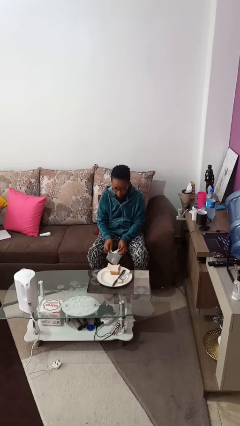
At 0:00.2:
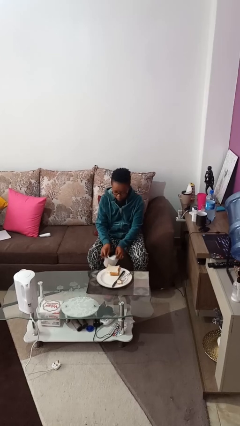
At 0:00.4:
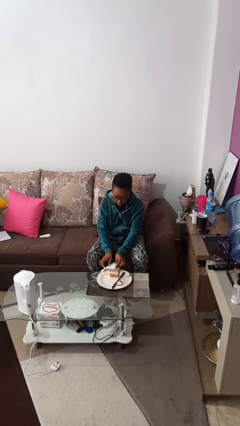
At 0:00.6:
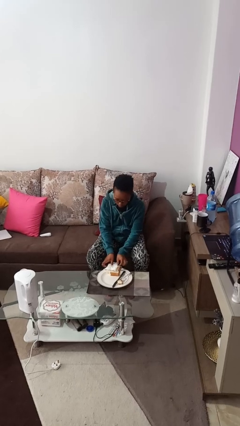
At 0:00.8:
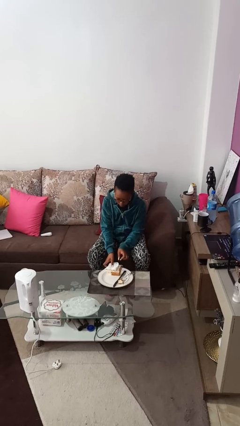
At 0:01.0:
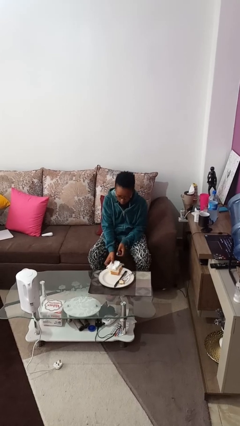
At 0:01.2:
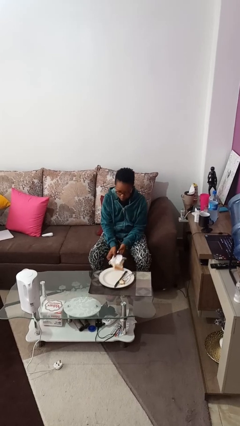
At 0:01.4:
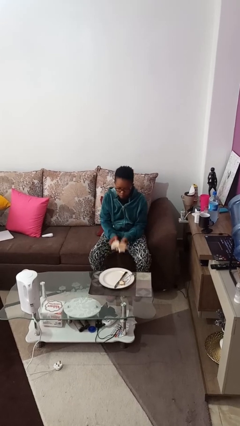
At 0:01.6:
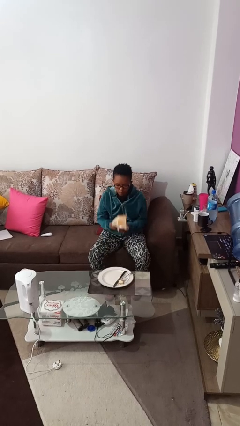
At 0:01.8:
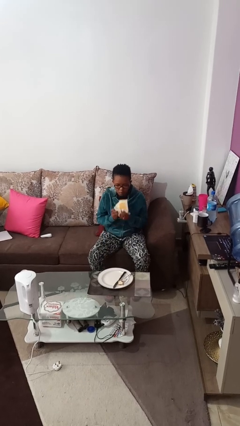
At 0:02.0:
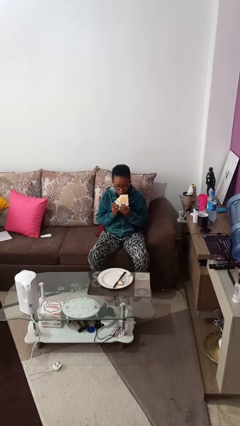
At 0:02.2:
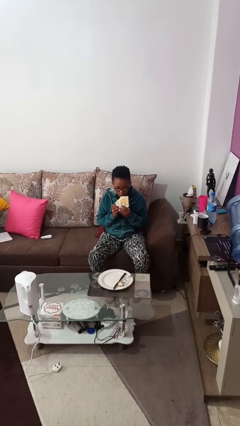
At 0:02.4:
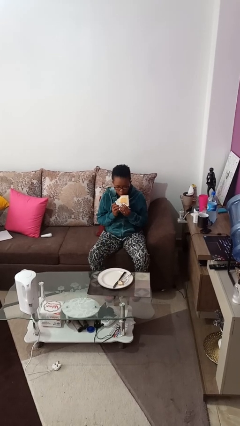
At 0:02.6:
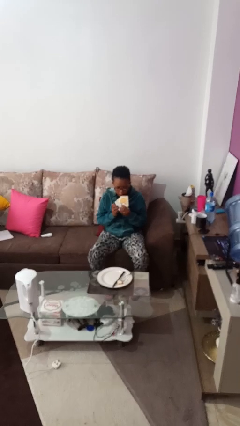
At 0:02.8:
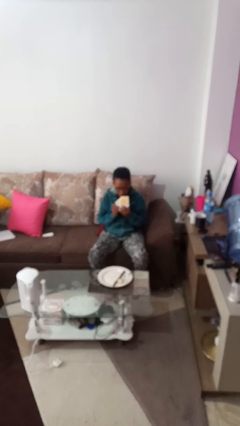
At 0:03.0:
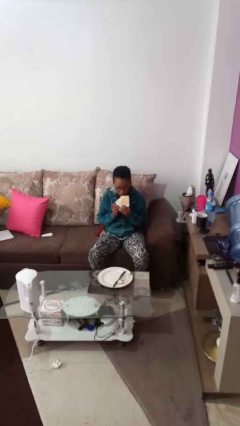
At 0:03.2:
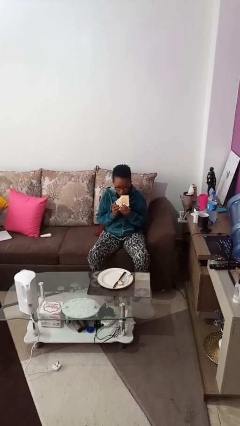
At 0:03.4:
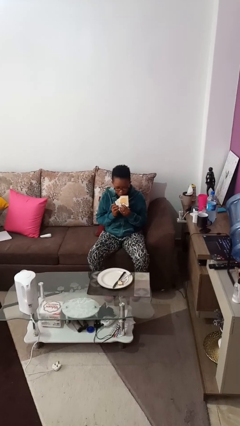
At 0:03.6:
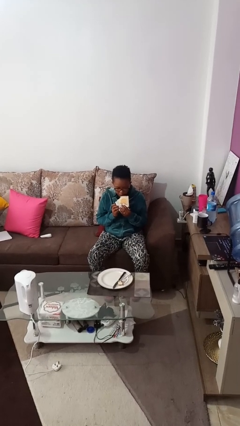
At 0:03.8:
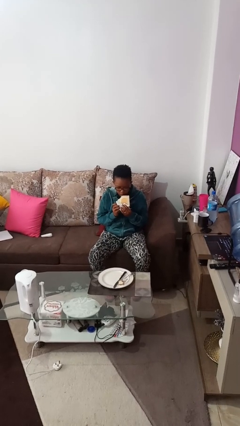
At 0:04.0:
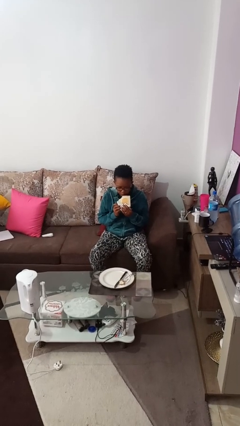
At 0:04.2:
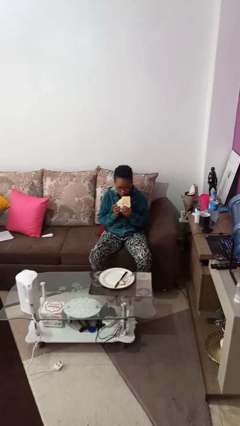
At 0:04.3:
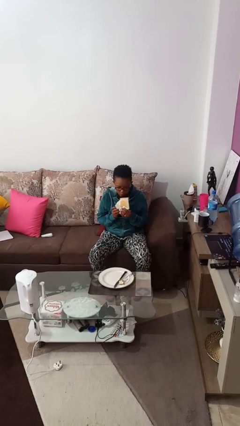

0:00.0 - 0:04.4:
person eats with hands

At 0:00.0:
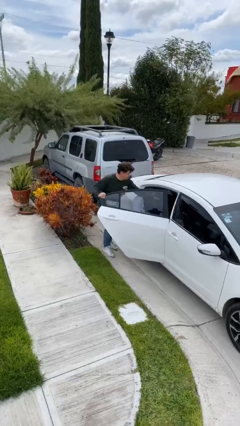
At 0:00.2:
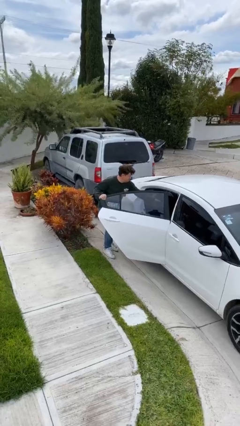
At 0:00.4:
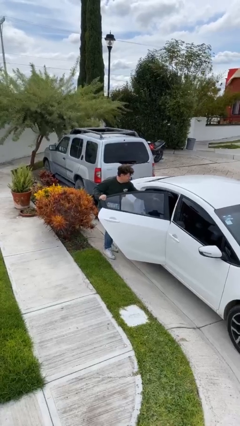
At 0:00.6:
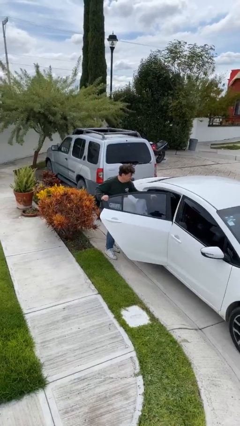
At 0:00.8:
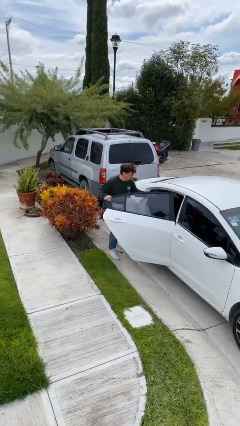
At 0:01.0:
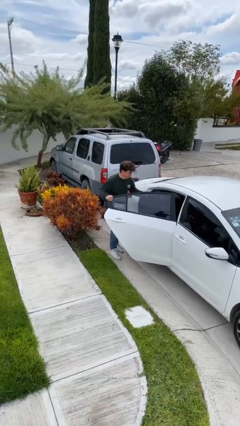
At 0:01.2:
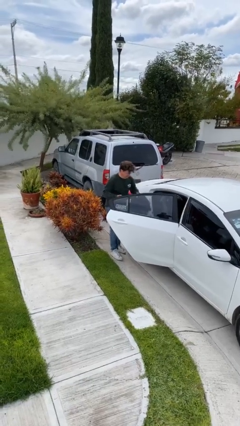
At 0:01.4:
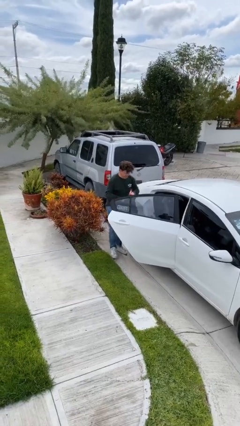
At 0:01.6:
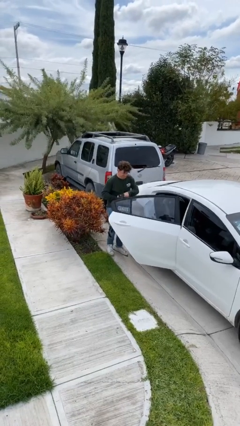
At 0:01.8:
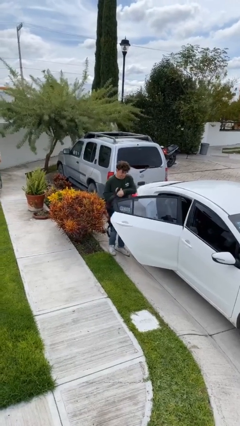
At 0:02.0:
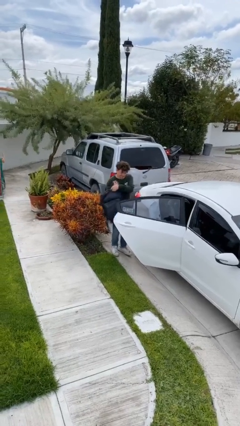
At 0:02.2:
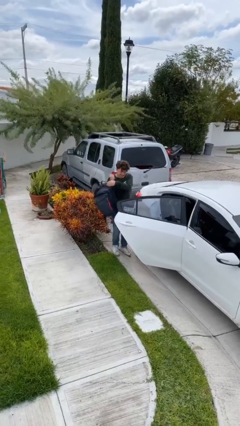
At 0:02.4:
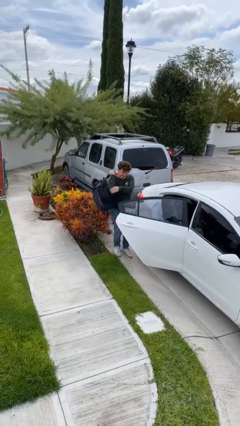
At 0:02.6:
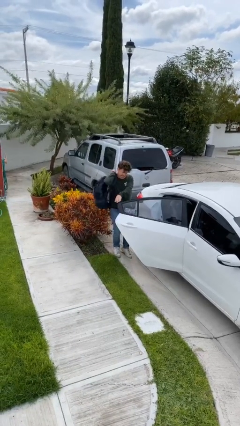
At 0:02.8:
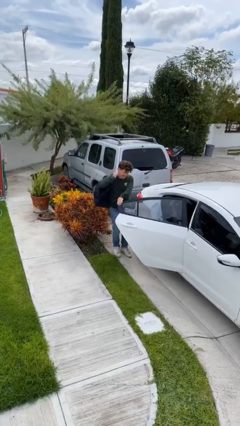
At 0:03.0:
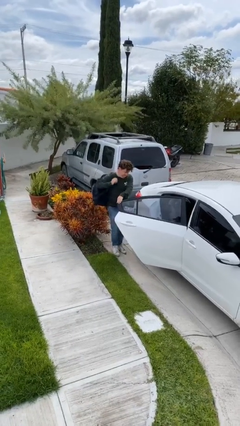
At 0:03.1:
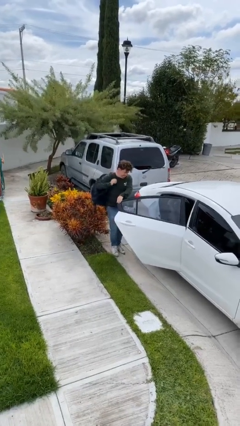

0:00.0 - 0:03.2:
person unloads car

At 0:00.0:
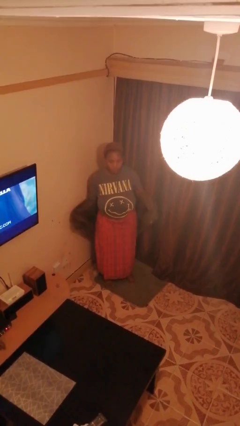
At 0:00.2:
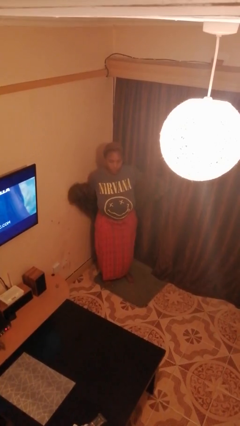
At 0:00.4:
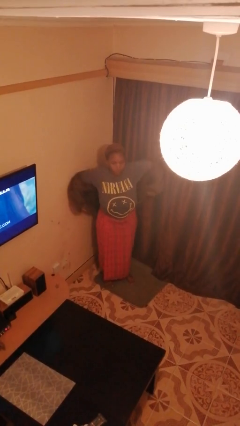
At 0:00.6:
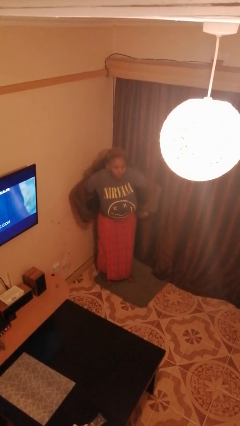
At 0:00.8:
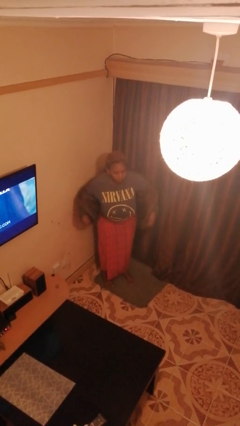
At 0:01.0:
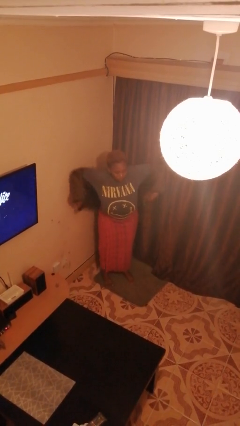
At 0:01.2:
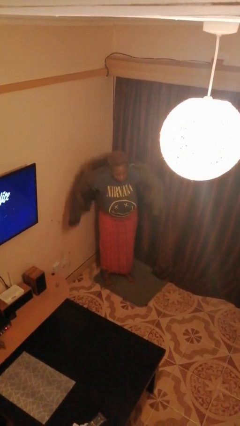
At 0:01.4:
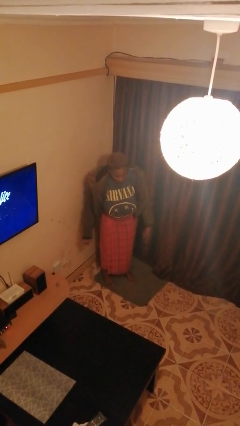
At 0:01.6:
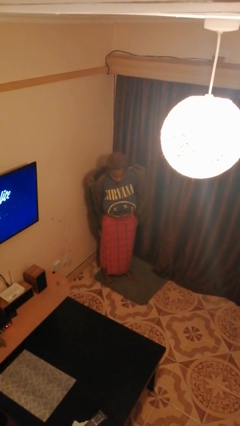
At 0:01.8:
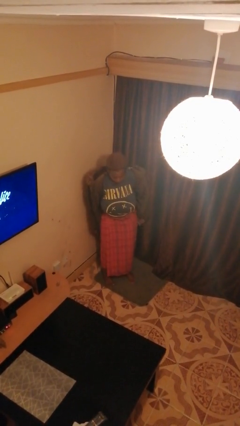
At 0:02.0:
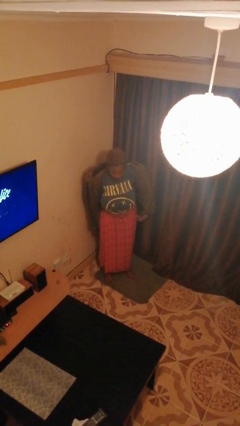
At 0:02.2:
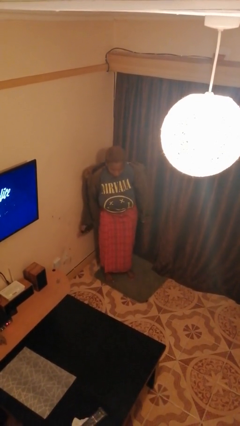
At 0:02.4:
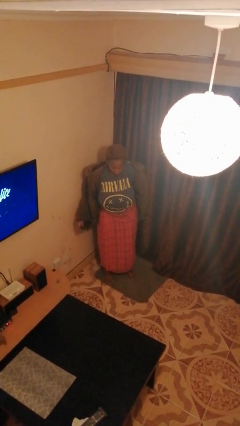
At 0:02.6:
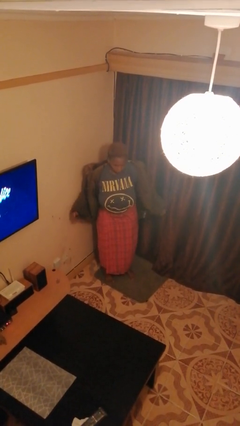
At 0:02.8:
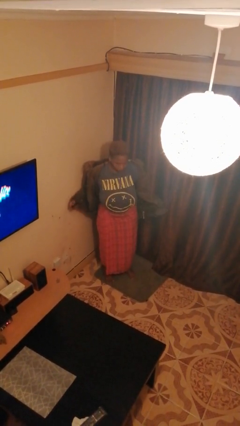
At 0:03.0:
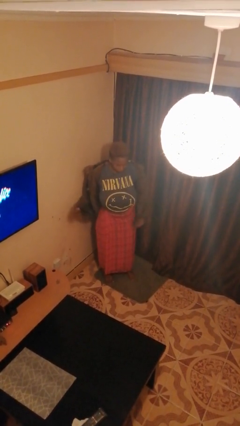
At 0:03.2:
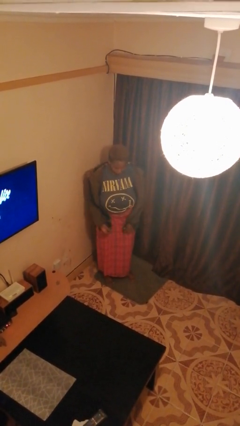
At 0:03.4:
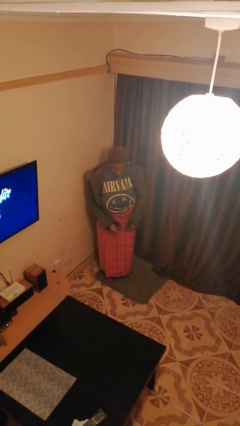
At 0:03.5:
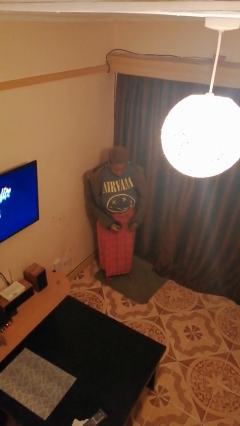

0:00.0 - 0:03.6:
person puts on jacket

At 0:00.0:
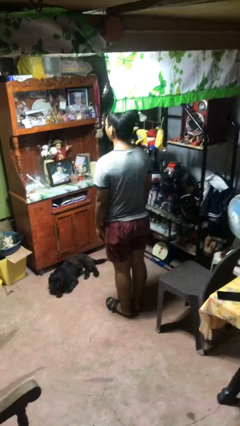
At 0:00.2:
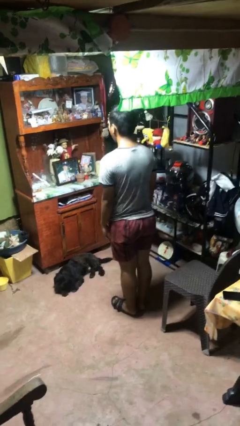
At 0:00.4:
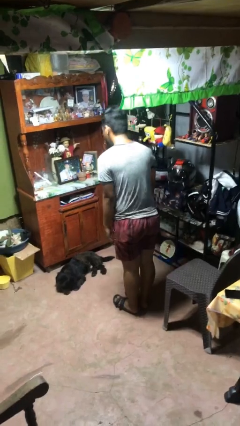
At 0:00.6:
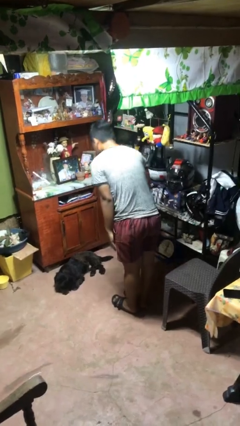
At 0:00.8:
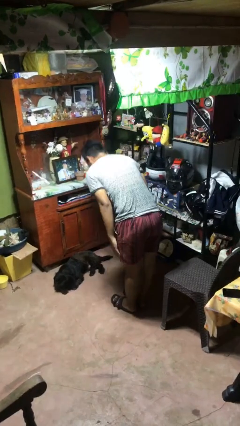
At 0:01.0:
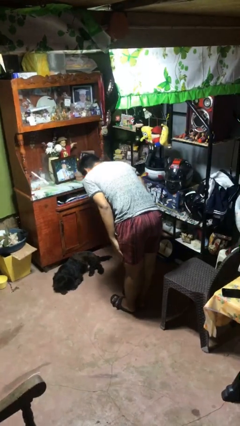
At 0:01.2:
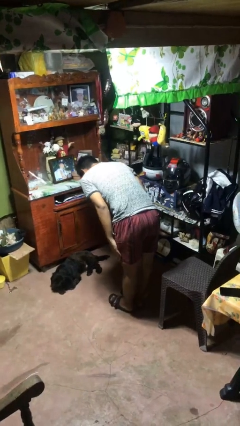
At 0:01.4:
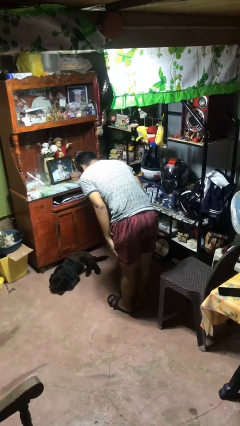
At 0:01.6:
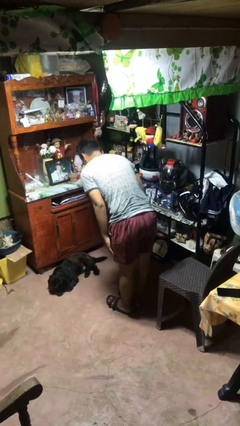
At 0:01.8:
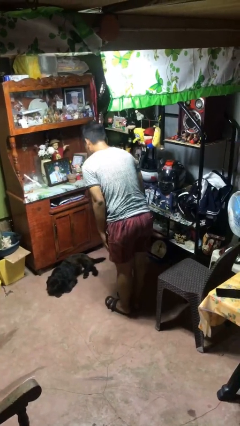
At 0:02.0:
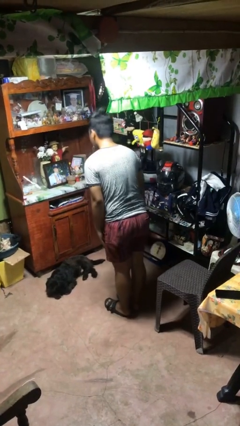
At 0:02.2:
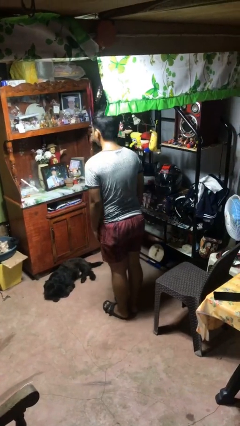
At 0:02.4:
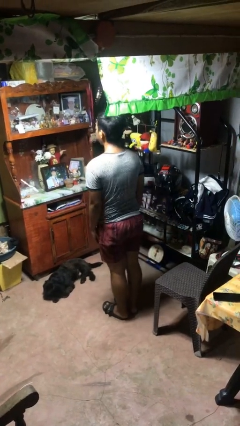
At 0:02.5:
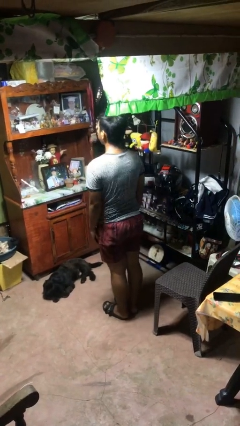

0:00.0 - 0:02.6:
person bows

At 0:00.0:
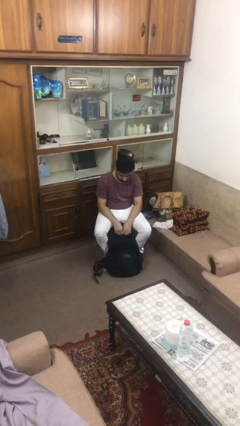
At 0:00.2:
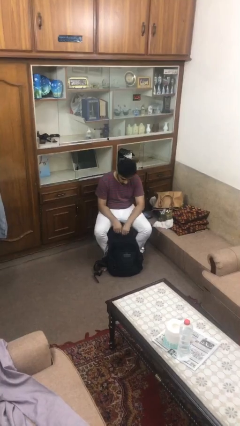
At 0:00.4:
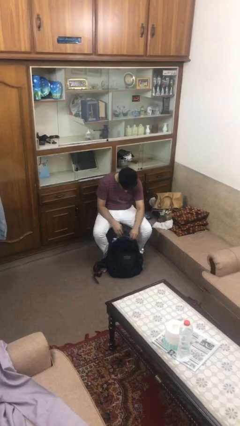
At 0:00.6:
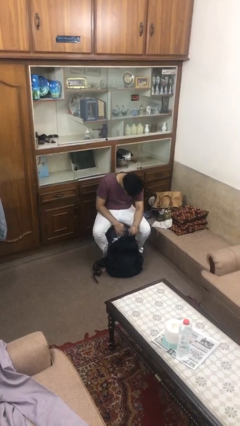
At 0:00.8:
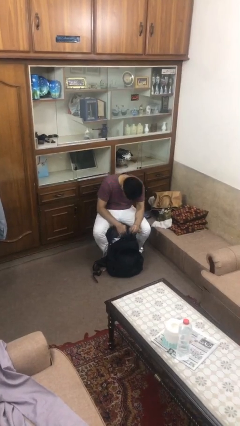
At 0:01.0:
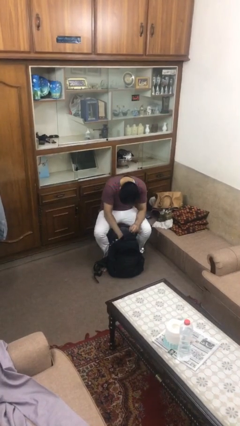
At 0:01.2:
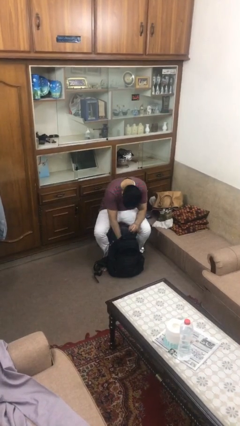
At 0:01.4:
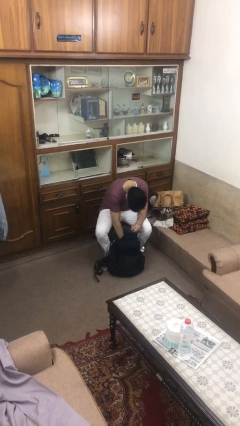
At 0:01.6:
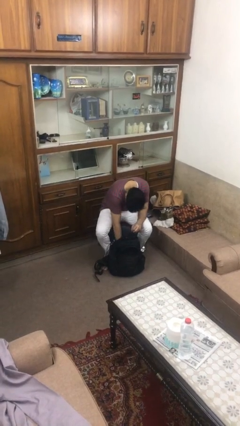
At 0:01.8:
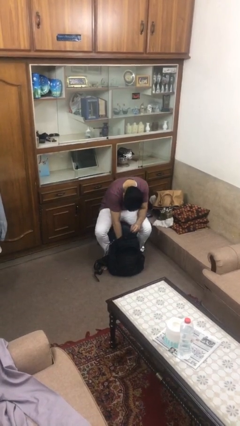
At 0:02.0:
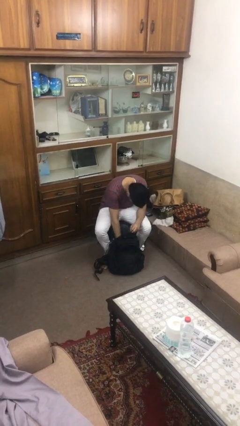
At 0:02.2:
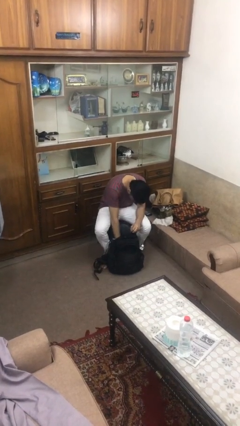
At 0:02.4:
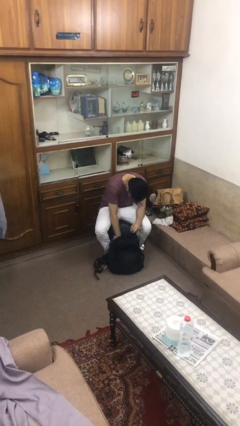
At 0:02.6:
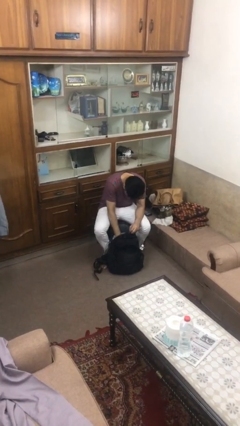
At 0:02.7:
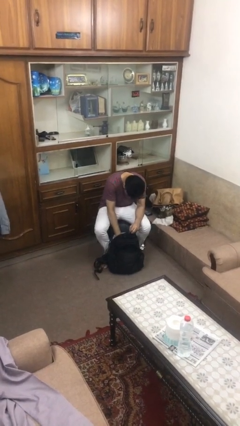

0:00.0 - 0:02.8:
person searches in backpack

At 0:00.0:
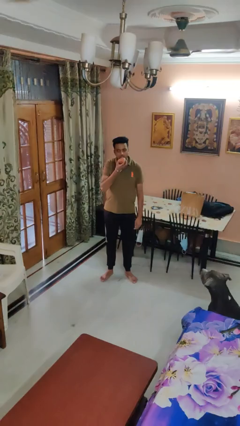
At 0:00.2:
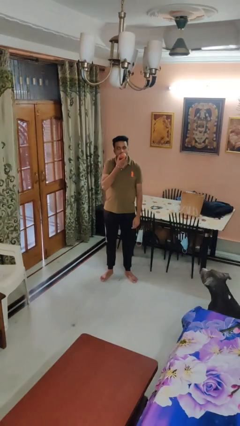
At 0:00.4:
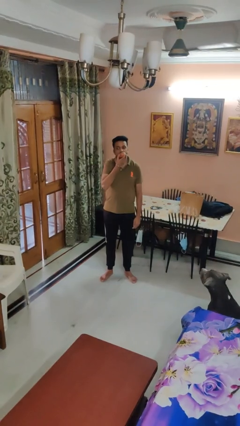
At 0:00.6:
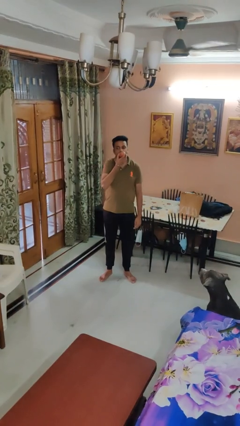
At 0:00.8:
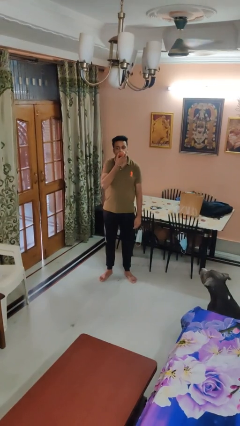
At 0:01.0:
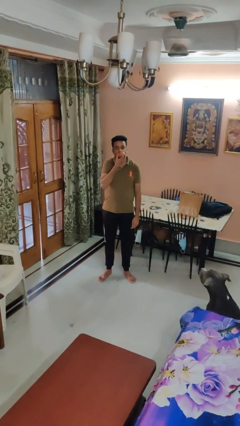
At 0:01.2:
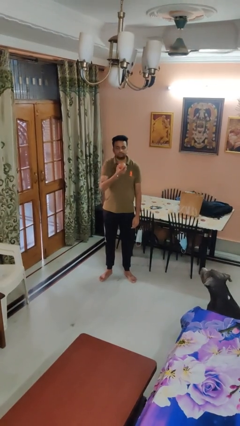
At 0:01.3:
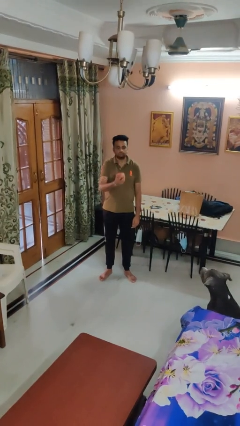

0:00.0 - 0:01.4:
person eats apple
